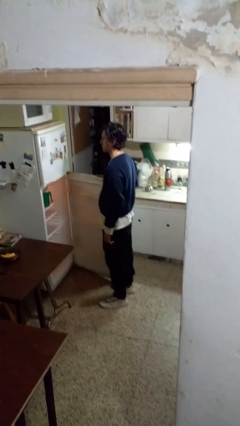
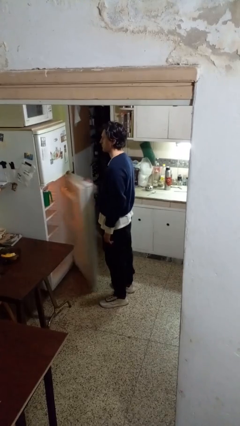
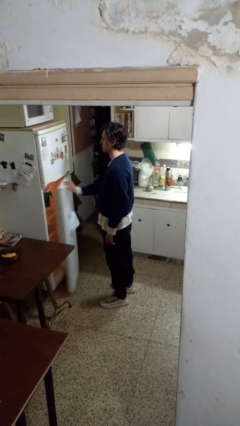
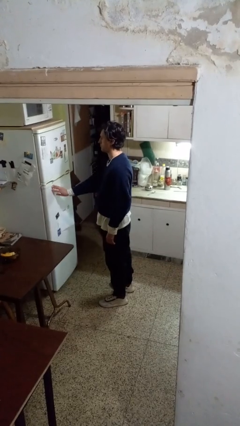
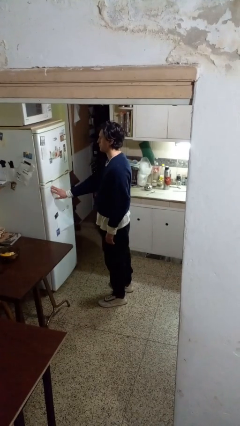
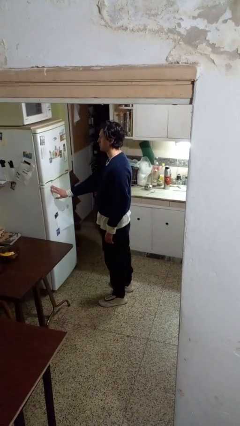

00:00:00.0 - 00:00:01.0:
person closes refrigerator

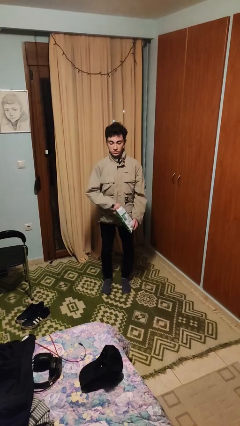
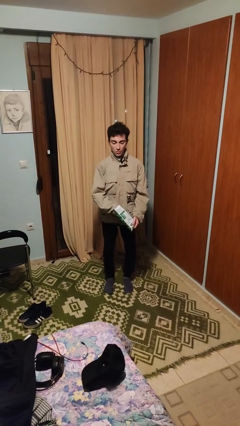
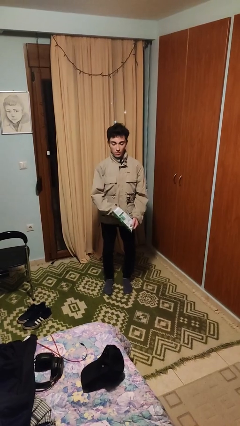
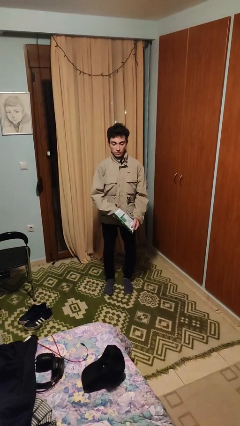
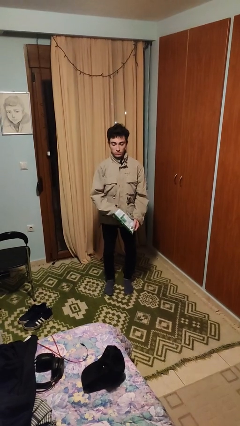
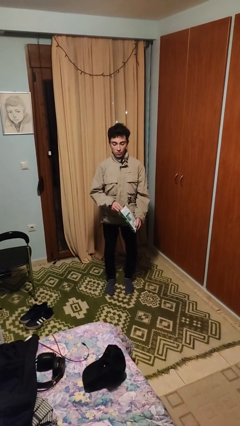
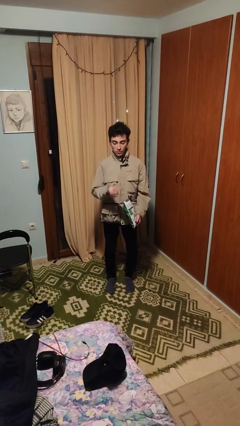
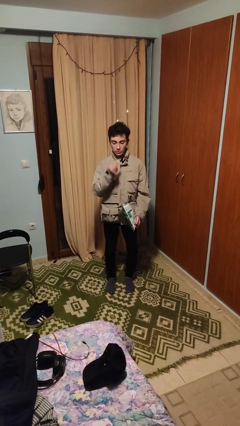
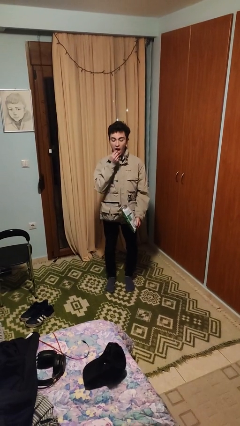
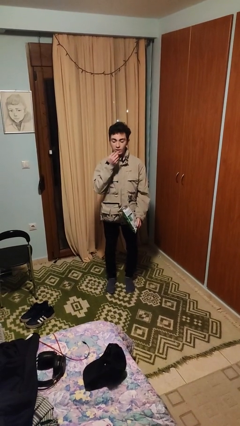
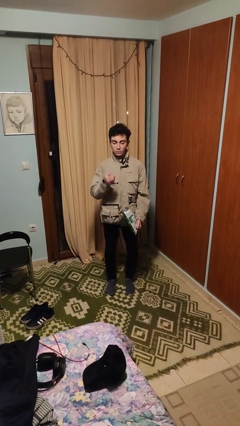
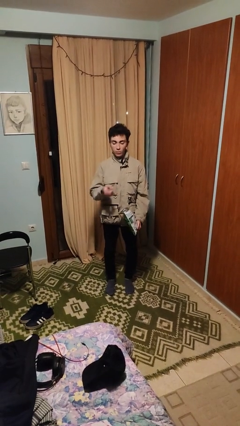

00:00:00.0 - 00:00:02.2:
person eats snack from bag

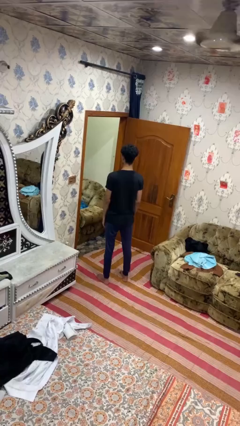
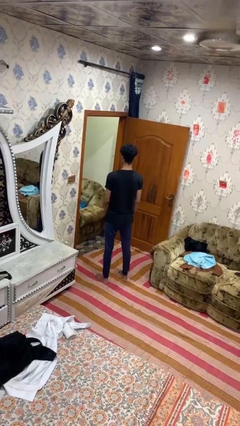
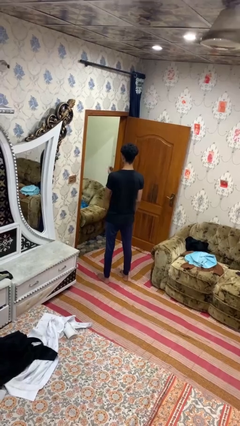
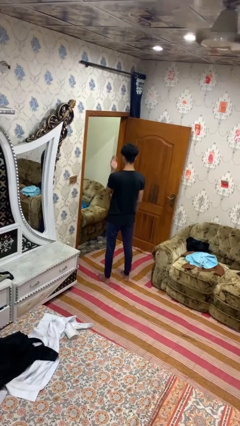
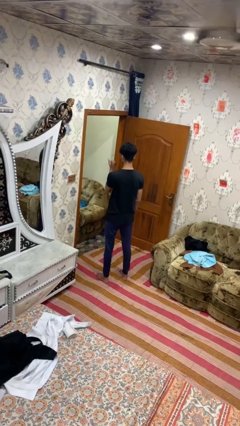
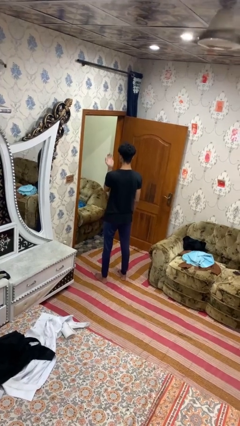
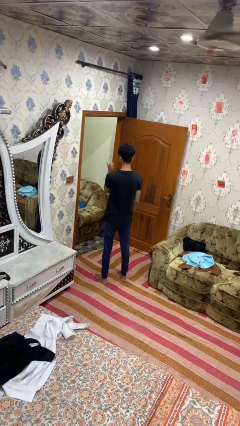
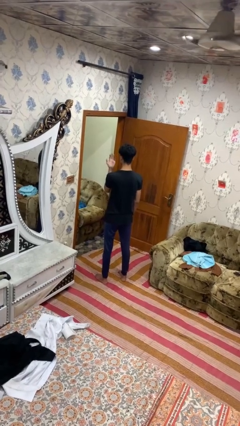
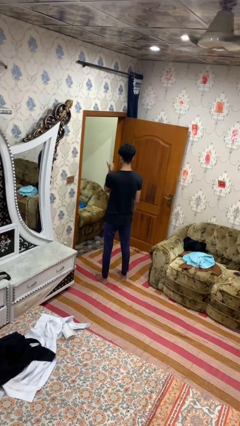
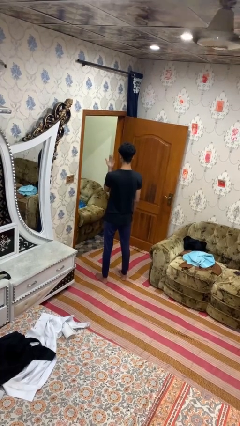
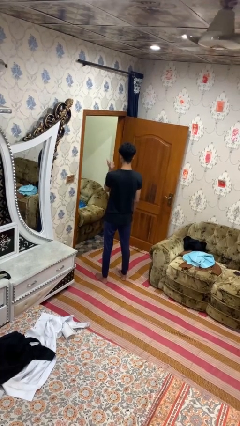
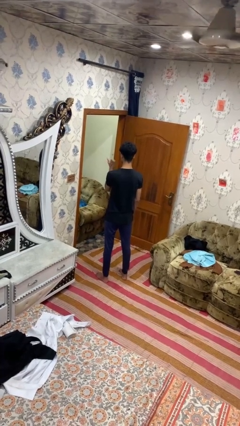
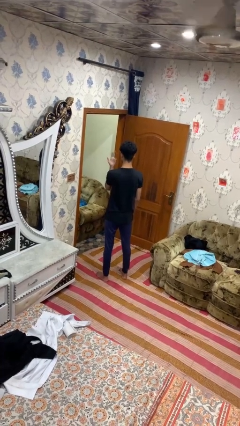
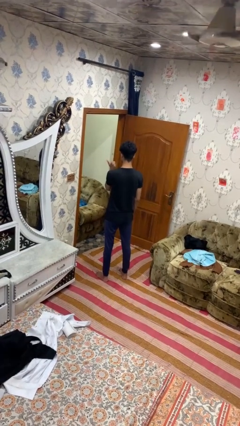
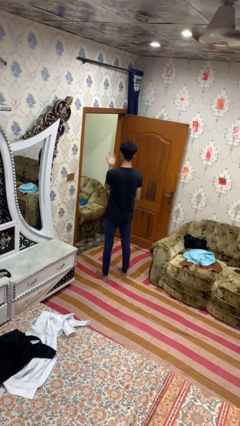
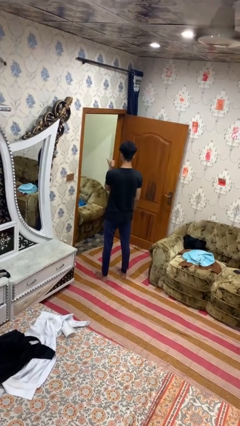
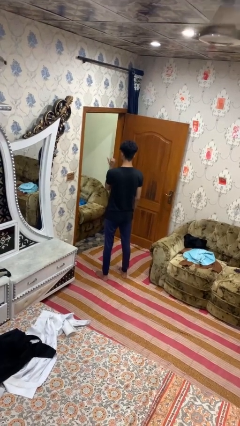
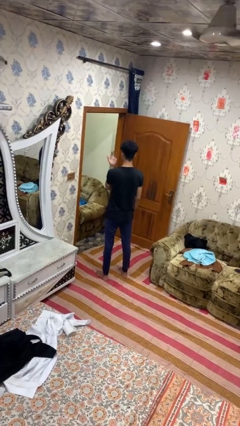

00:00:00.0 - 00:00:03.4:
person gestures listen closely

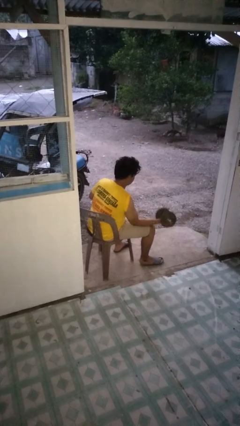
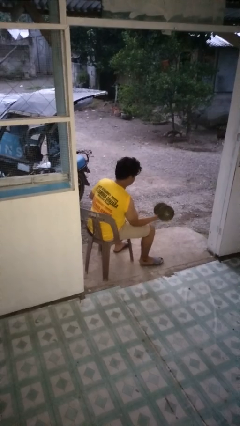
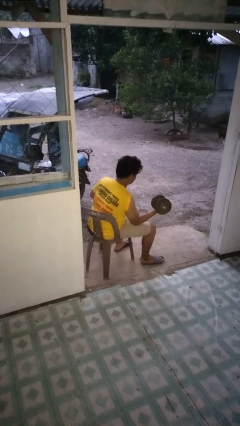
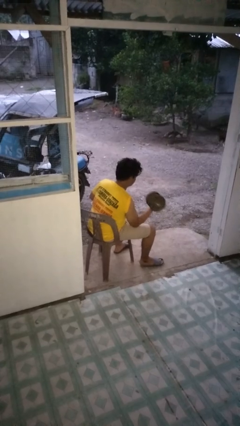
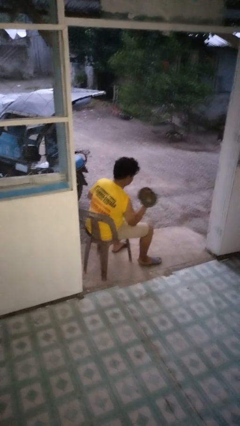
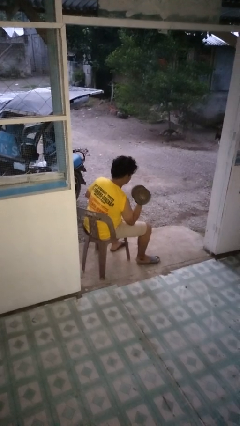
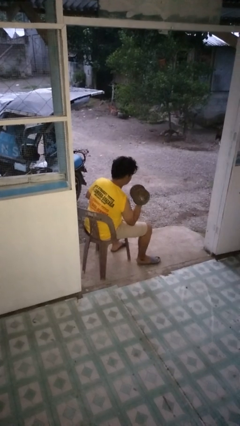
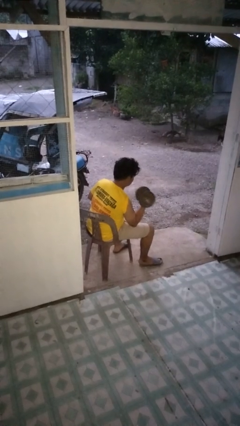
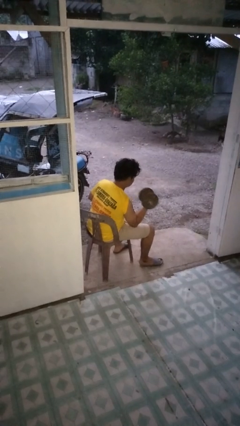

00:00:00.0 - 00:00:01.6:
person lifts dumbbells

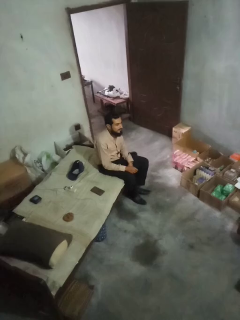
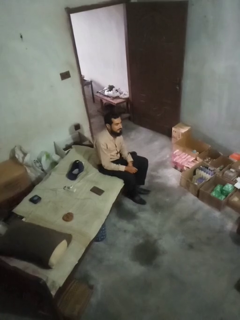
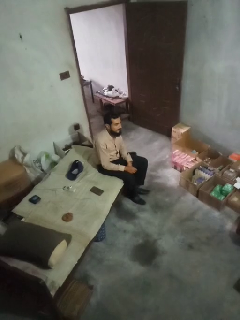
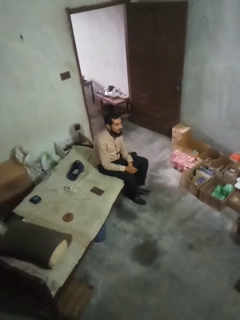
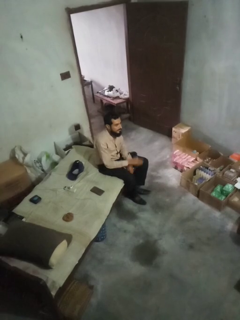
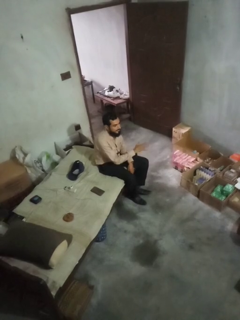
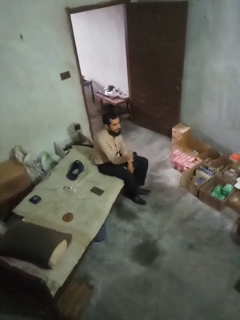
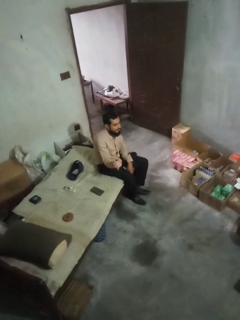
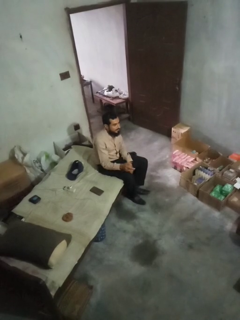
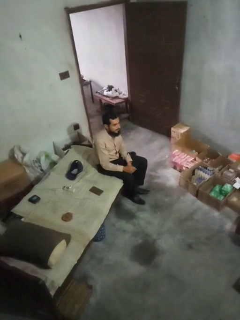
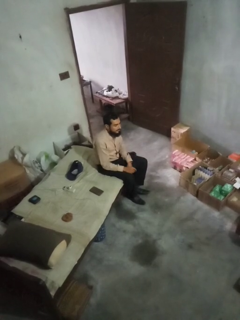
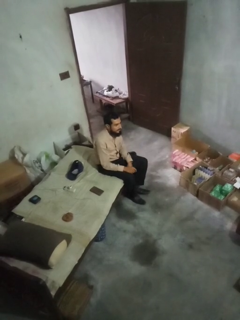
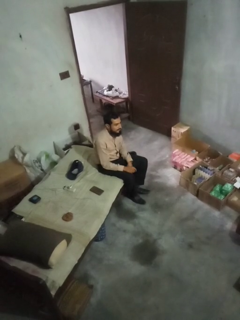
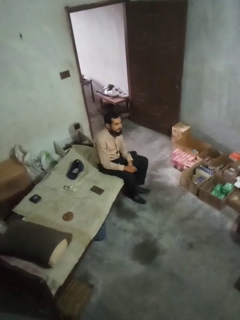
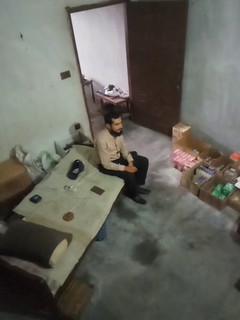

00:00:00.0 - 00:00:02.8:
person gestures swipe right

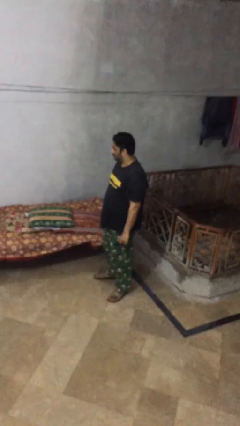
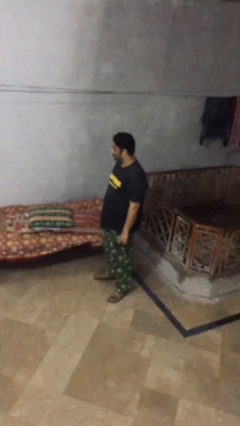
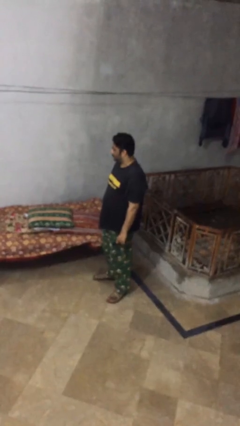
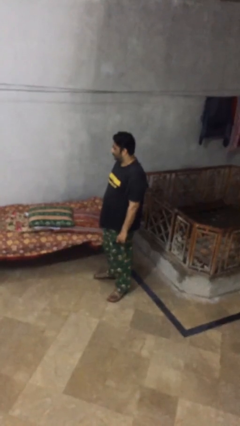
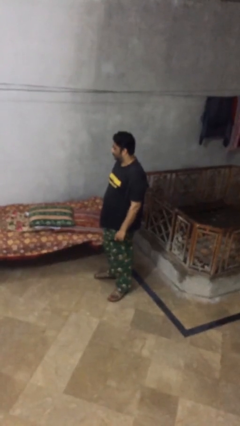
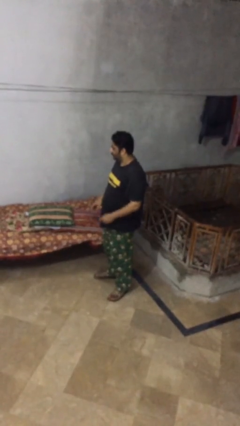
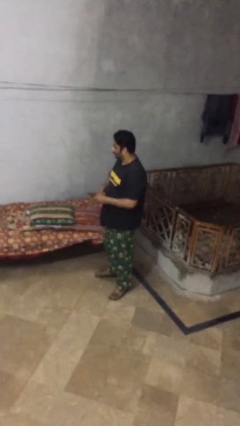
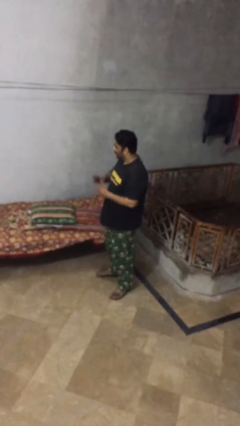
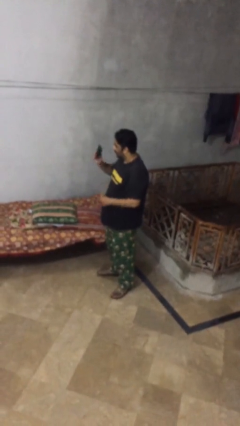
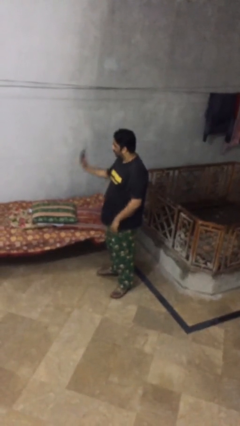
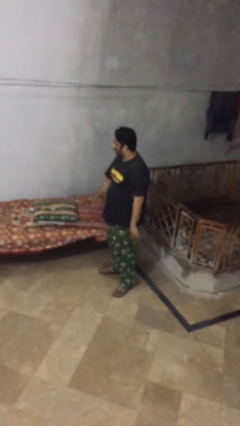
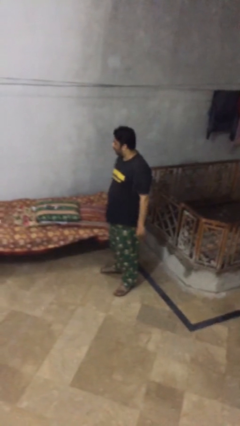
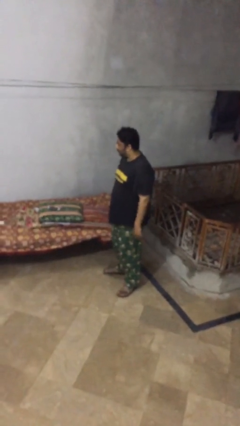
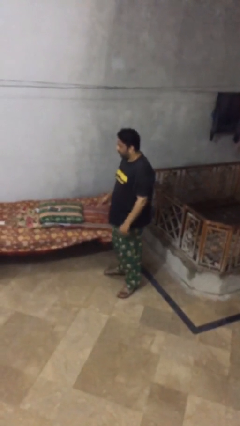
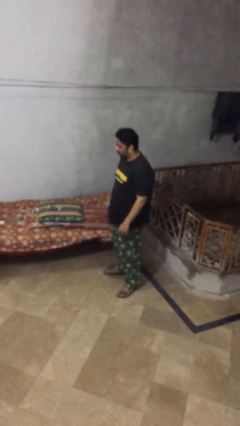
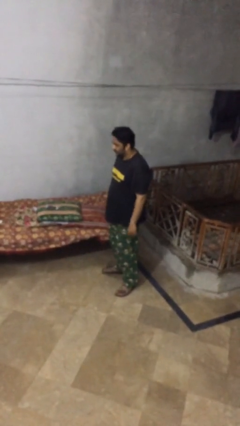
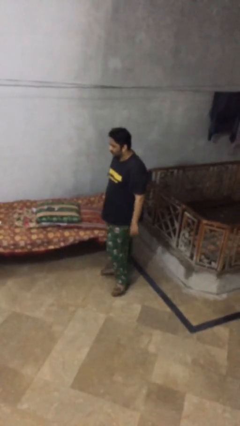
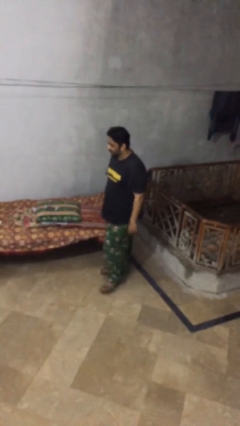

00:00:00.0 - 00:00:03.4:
person puts down object on table

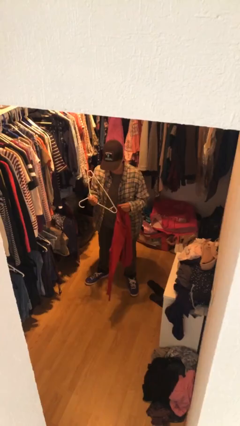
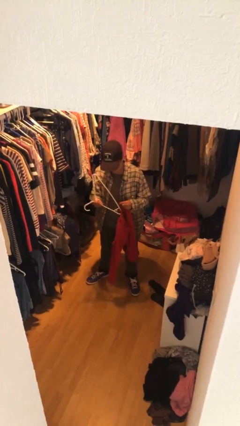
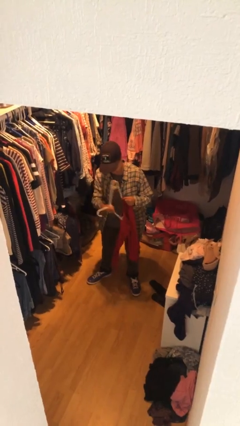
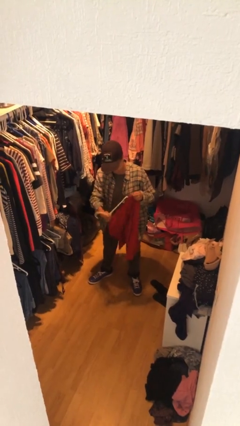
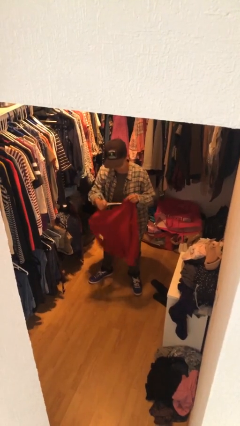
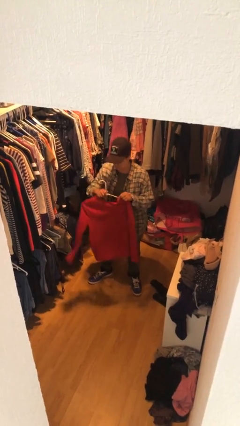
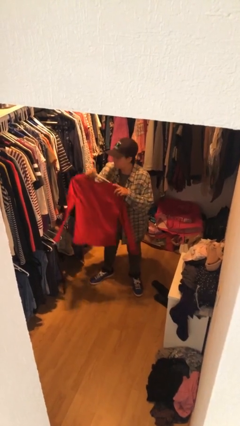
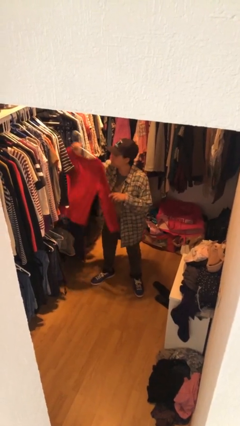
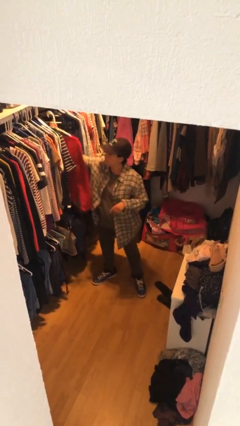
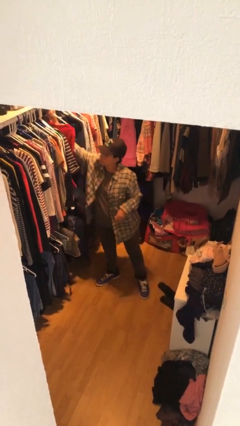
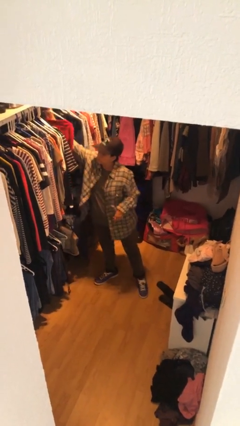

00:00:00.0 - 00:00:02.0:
person puts clothes into closet

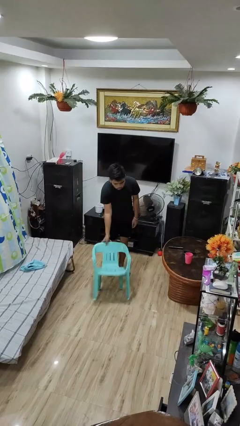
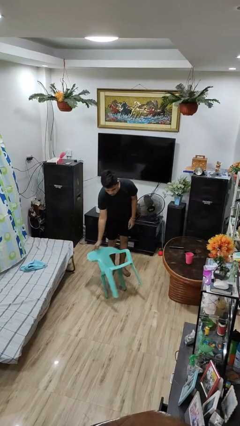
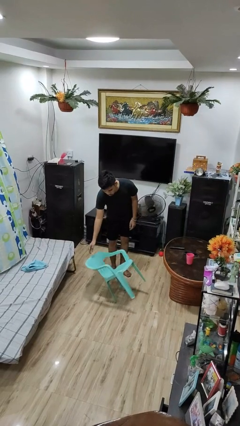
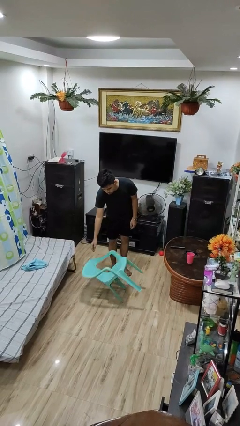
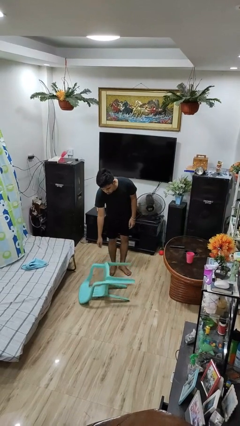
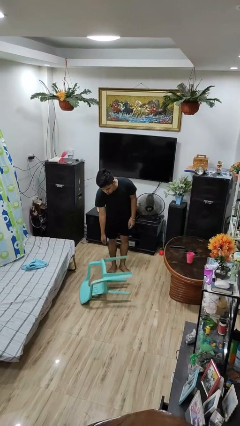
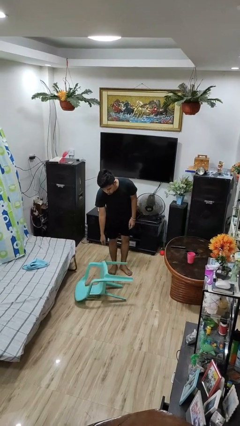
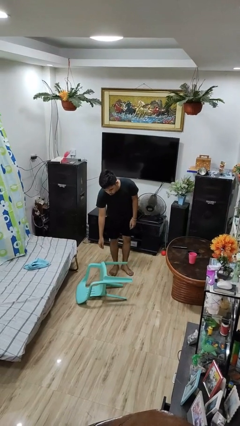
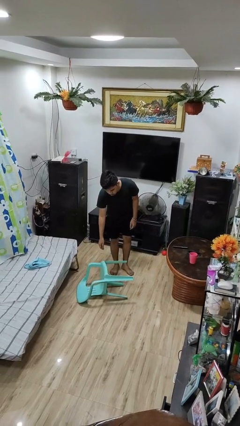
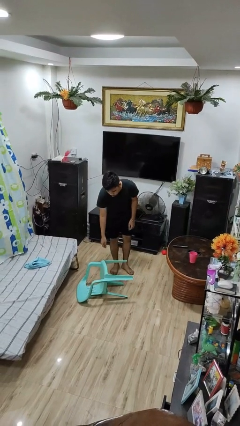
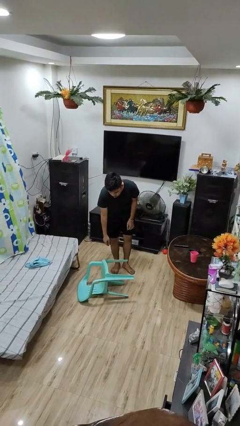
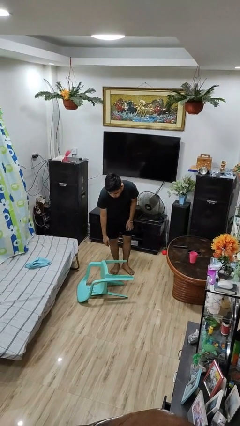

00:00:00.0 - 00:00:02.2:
person knocks over furniture
